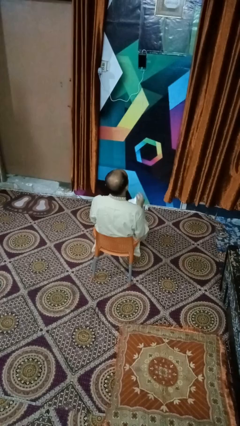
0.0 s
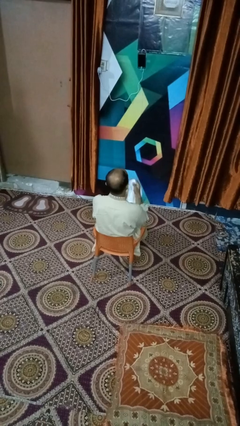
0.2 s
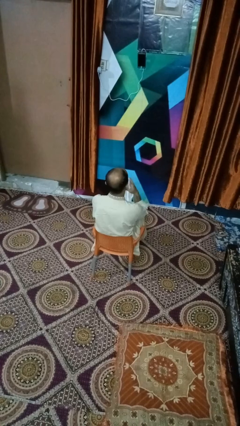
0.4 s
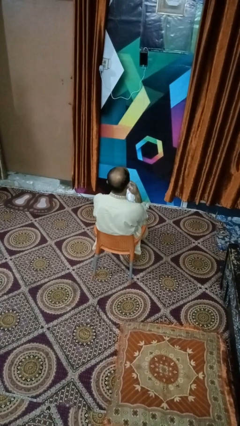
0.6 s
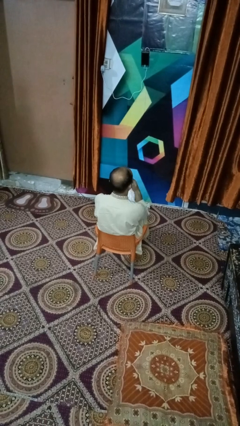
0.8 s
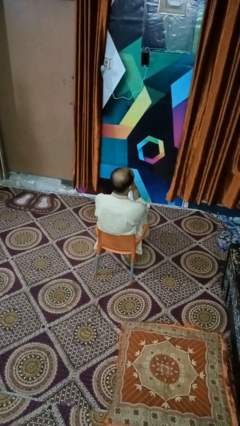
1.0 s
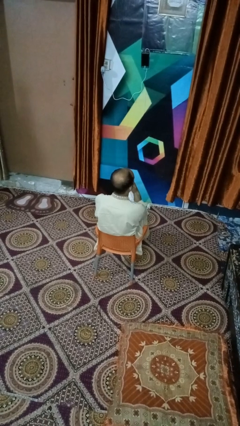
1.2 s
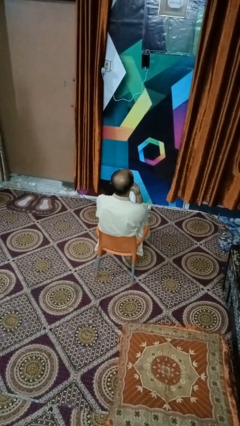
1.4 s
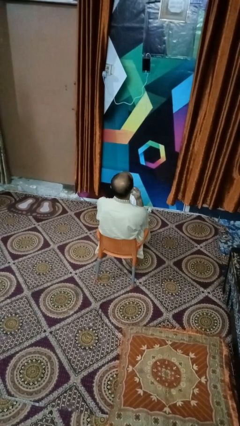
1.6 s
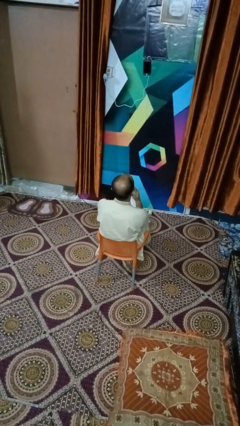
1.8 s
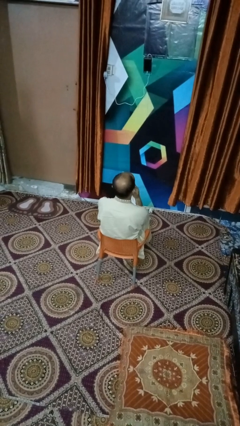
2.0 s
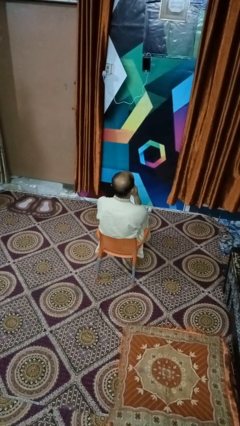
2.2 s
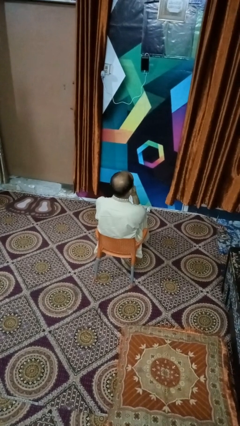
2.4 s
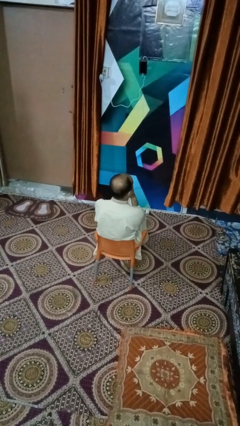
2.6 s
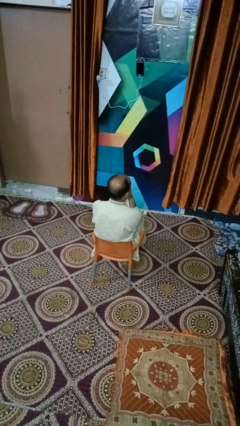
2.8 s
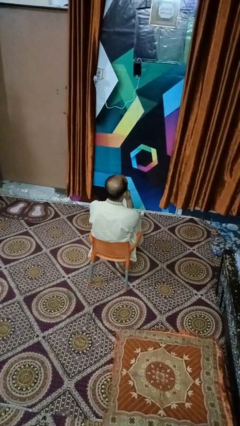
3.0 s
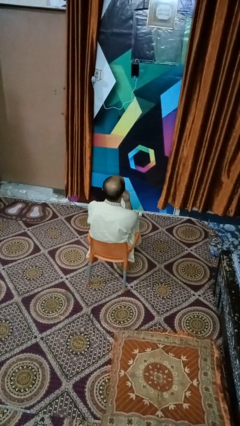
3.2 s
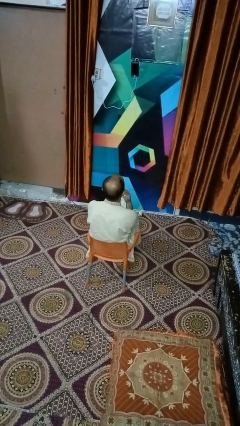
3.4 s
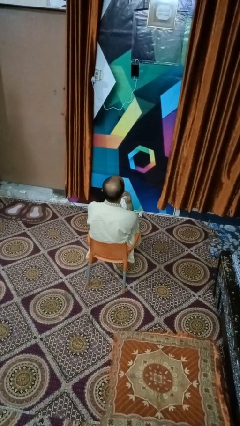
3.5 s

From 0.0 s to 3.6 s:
person wipes mouth with napkin

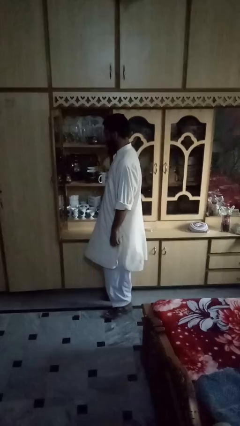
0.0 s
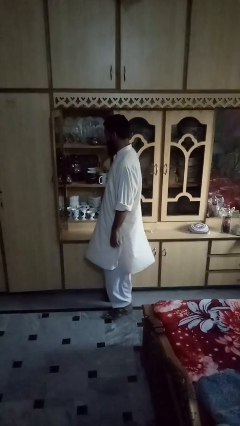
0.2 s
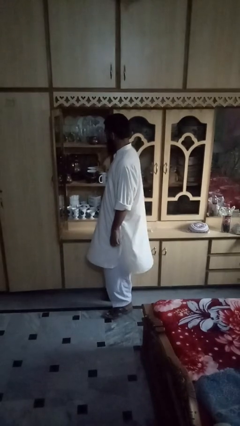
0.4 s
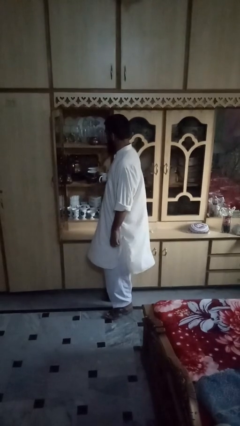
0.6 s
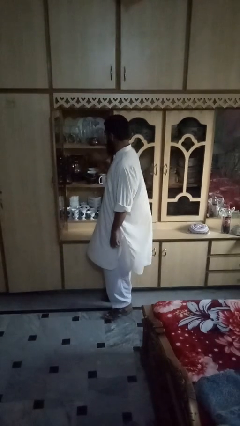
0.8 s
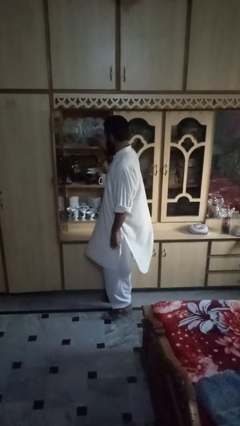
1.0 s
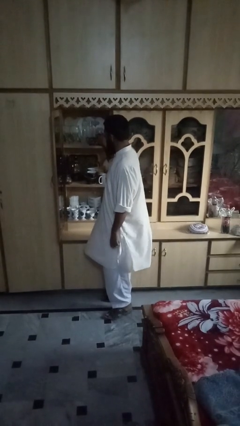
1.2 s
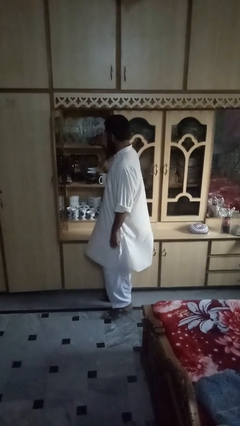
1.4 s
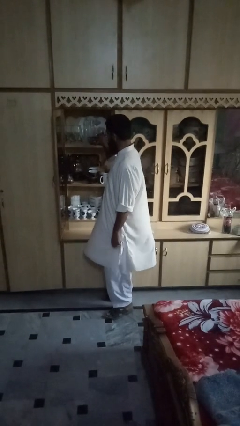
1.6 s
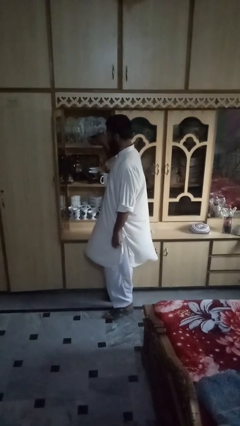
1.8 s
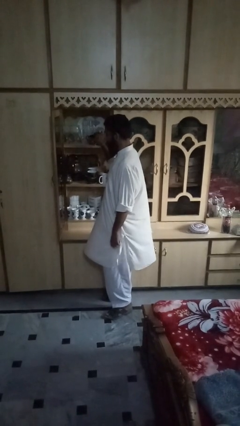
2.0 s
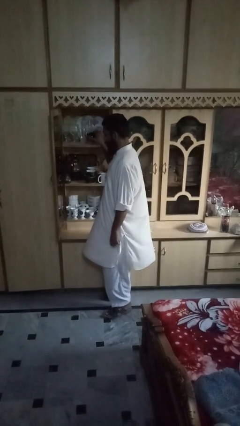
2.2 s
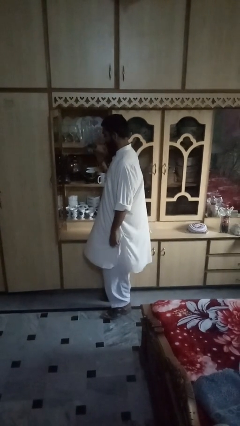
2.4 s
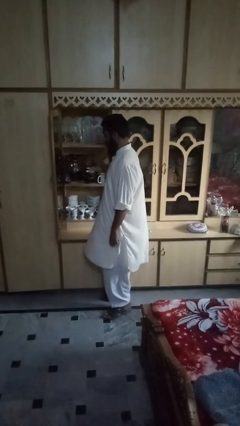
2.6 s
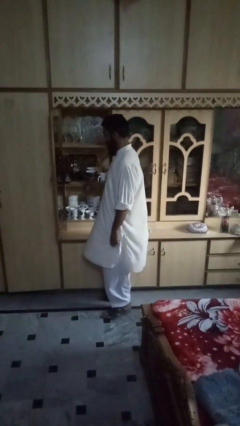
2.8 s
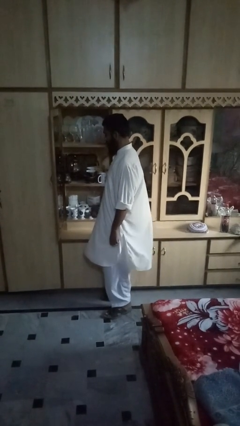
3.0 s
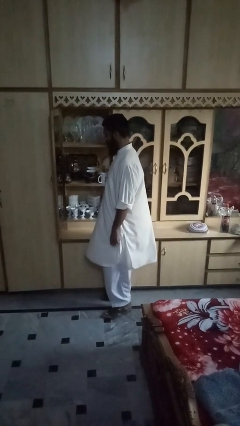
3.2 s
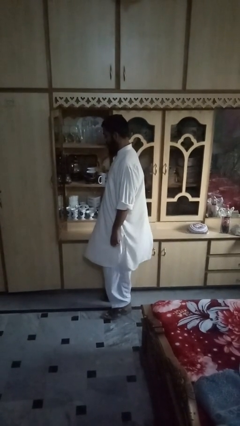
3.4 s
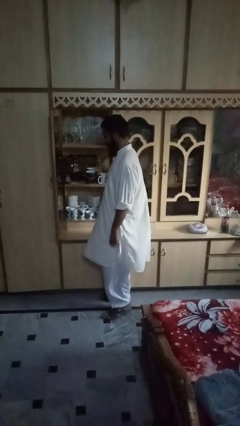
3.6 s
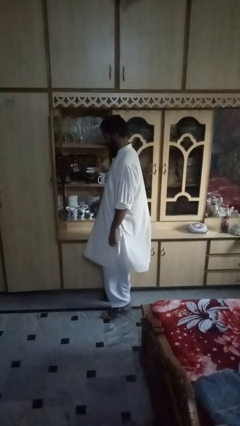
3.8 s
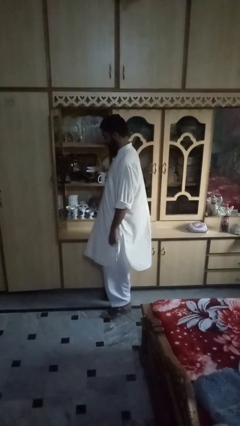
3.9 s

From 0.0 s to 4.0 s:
person picks up object from shelf

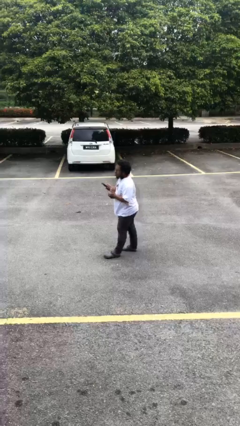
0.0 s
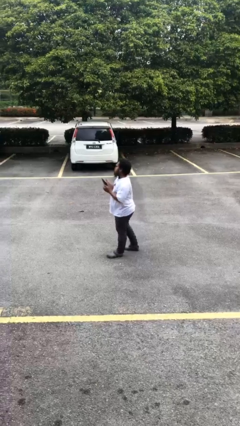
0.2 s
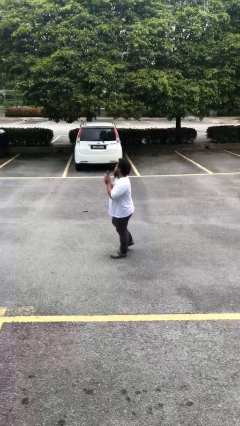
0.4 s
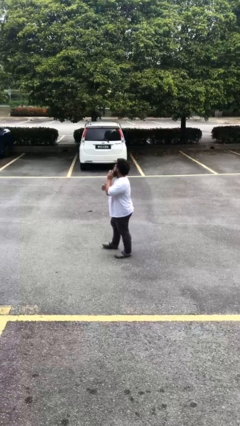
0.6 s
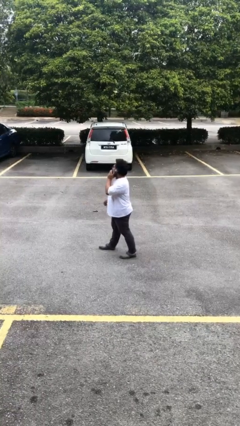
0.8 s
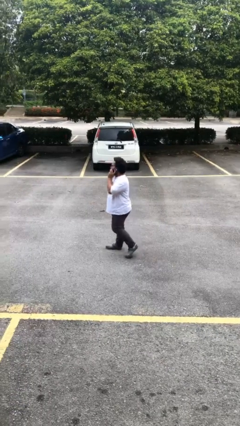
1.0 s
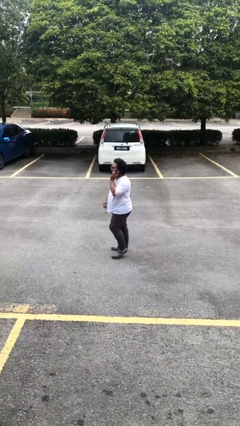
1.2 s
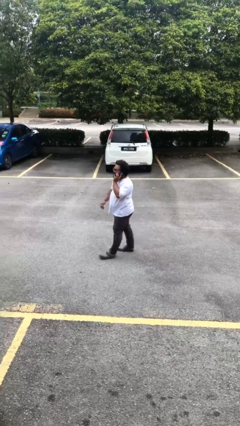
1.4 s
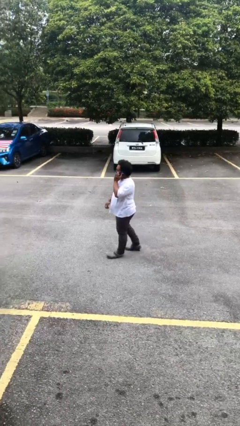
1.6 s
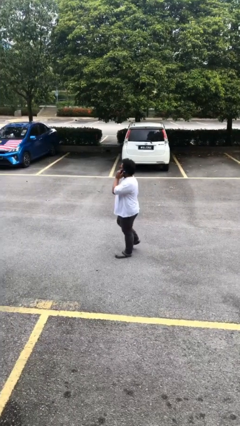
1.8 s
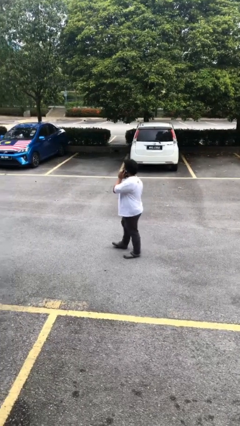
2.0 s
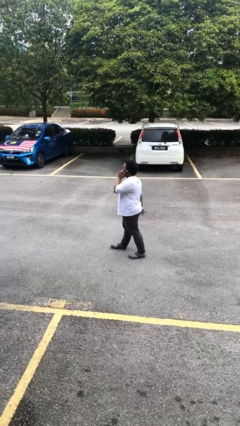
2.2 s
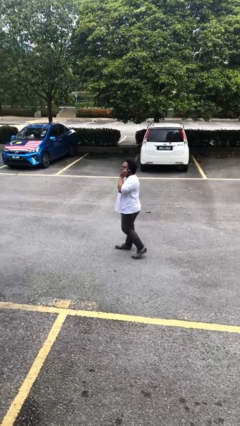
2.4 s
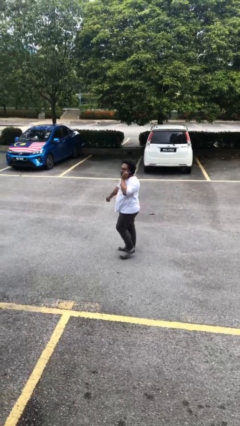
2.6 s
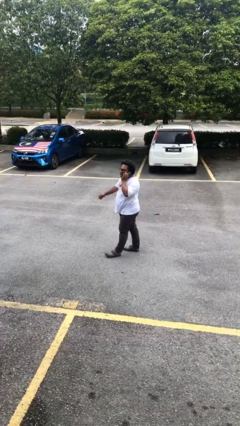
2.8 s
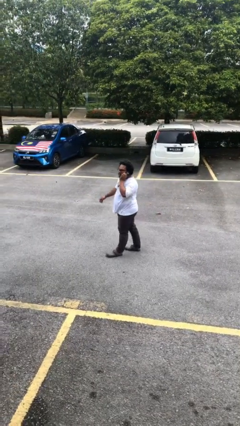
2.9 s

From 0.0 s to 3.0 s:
person talks on phone

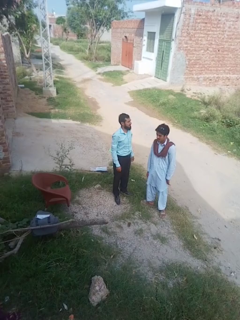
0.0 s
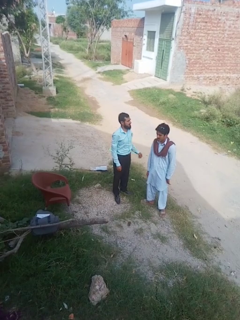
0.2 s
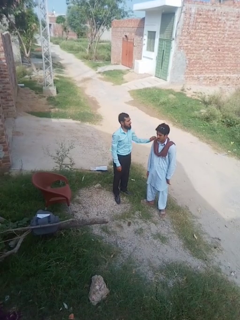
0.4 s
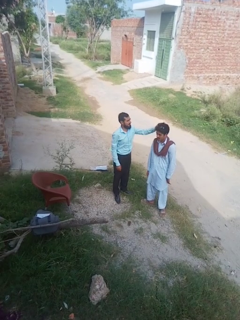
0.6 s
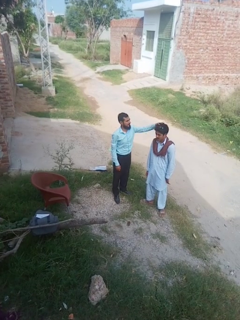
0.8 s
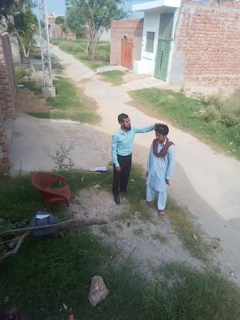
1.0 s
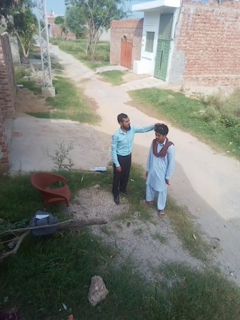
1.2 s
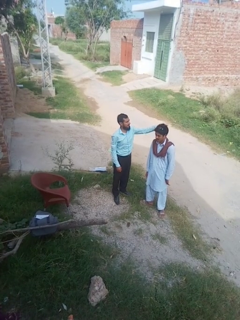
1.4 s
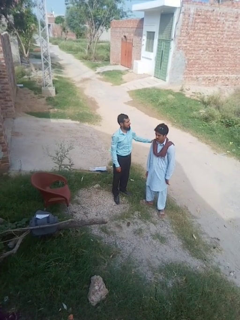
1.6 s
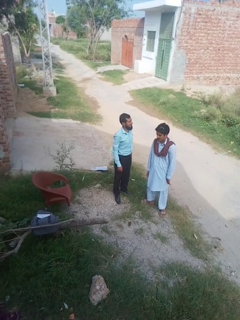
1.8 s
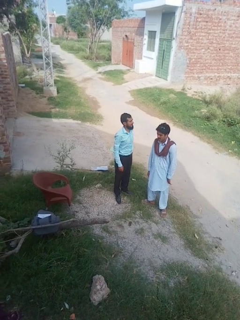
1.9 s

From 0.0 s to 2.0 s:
person grabs person by hair

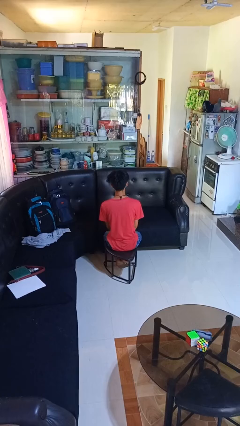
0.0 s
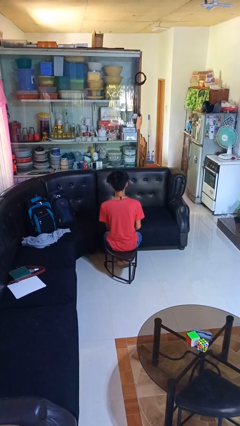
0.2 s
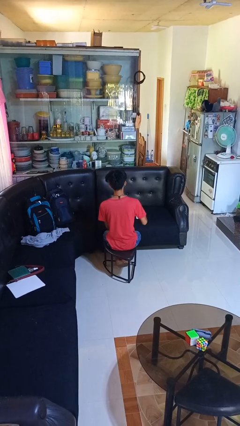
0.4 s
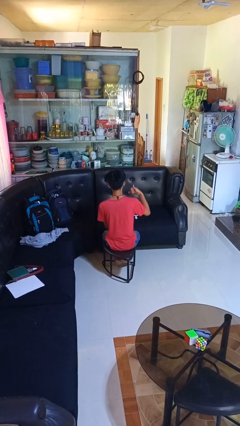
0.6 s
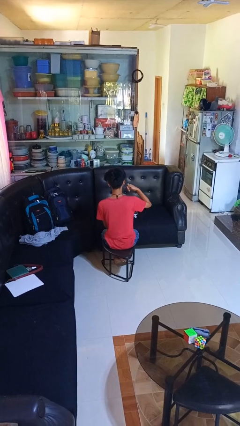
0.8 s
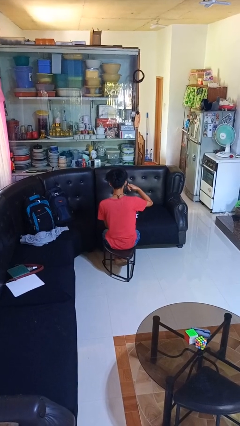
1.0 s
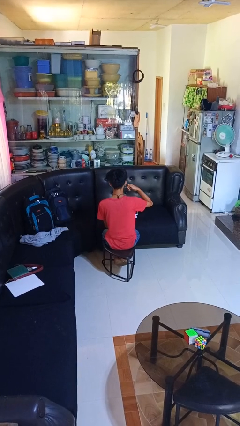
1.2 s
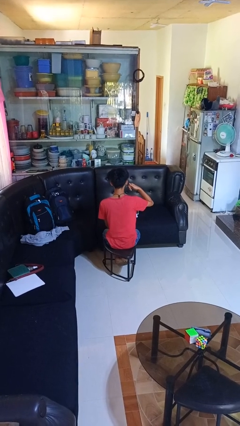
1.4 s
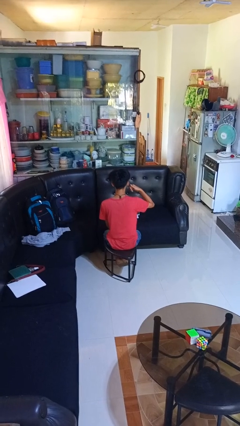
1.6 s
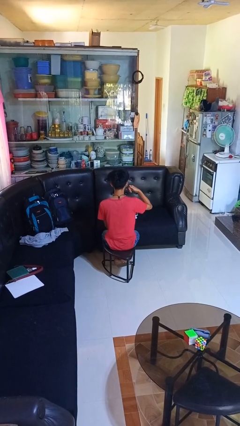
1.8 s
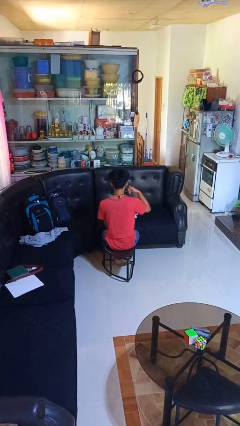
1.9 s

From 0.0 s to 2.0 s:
person gestures call me

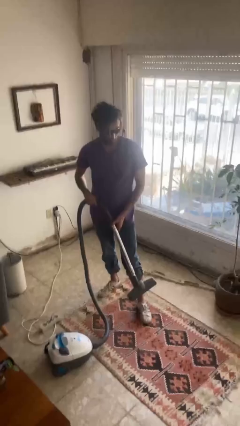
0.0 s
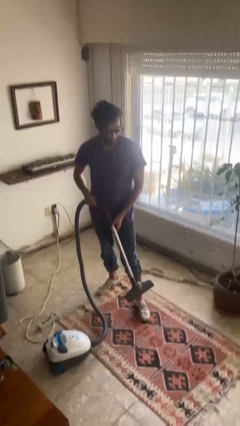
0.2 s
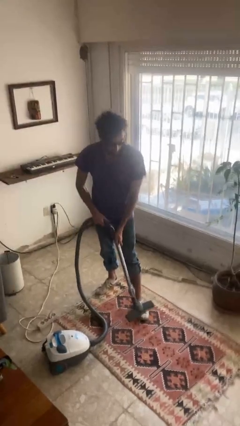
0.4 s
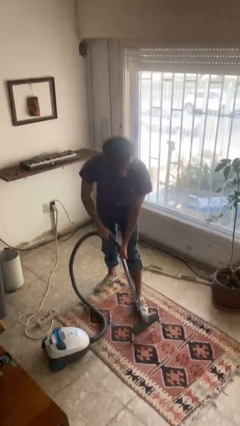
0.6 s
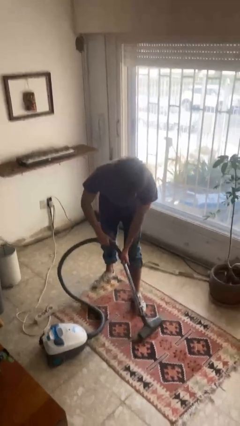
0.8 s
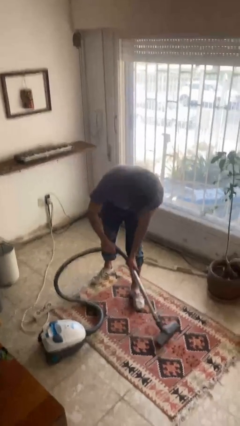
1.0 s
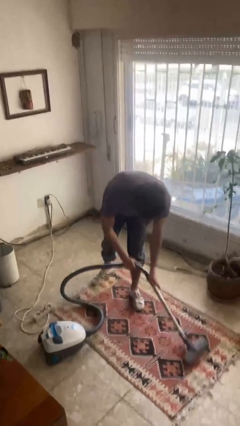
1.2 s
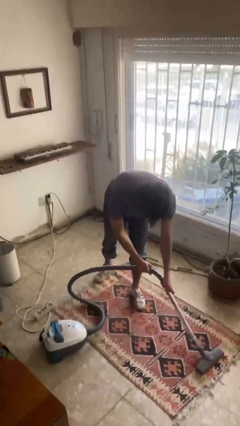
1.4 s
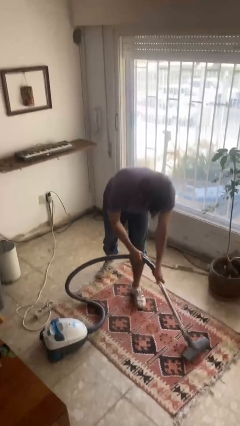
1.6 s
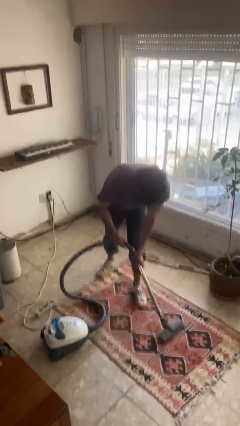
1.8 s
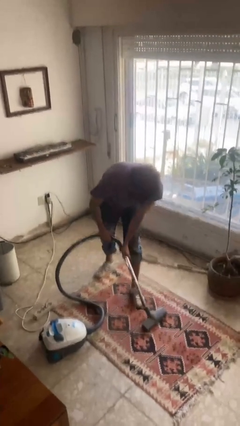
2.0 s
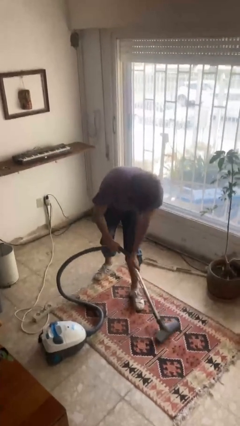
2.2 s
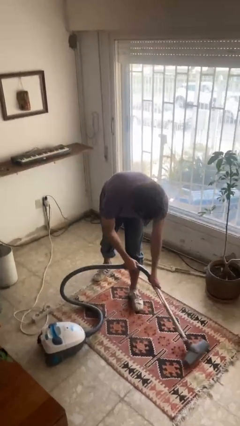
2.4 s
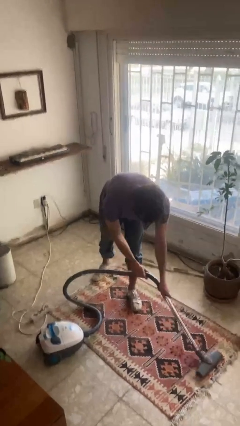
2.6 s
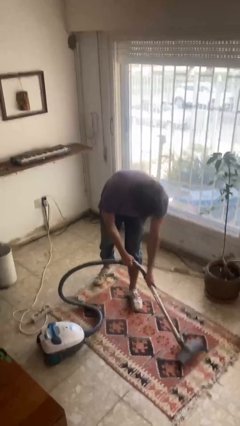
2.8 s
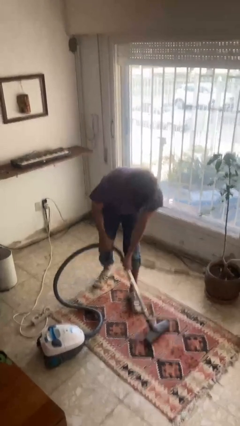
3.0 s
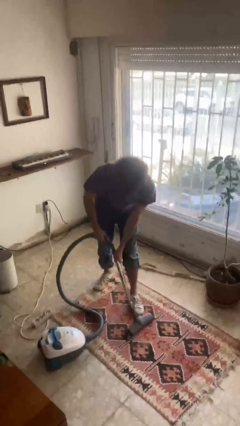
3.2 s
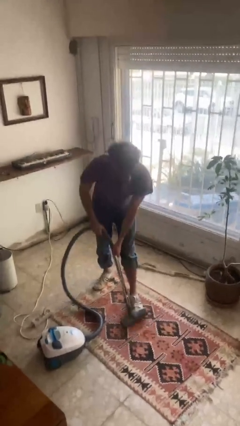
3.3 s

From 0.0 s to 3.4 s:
person vacuums carpet
